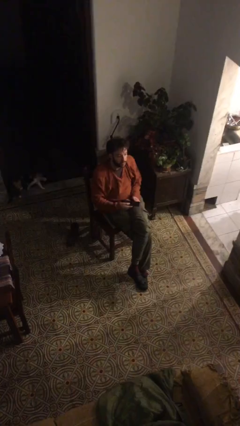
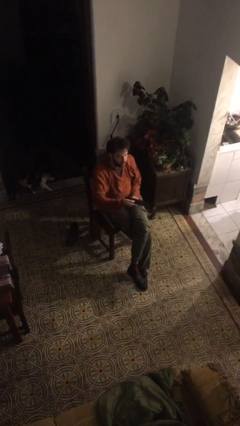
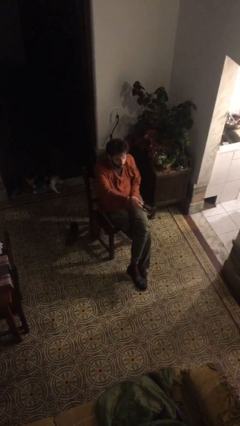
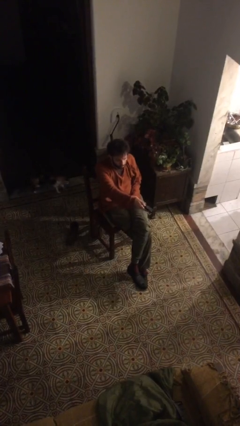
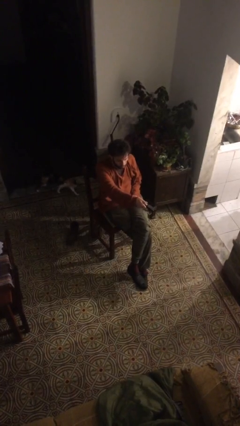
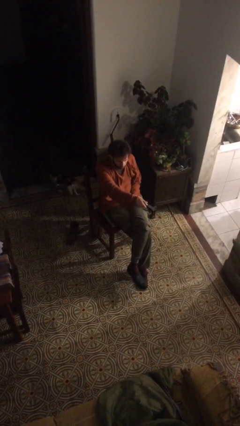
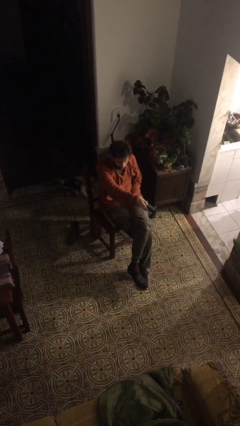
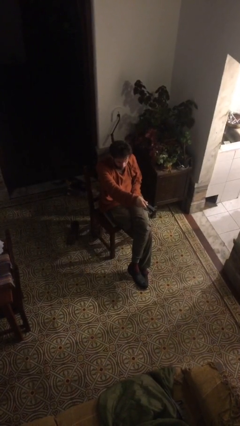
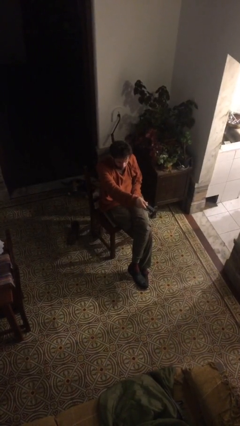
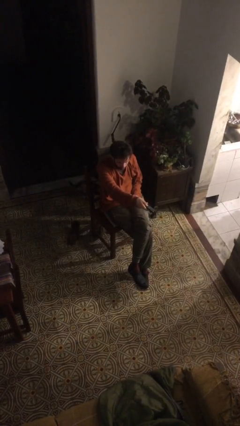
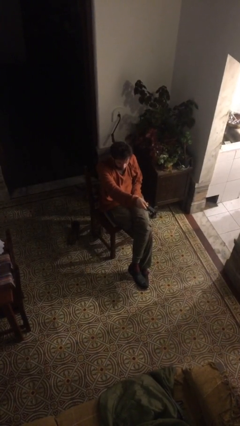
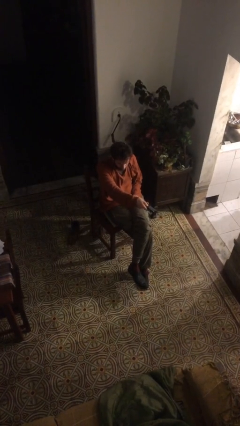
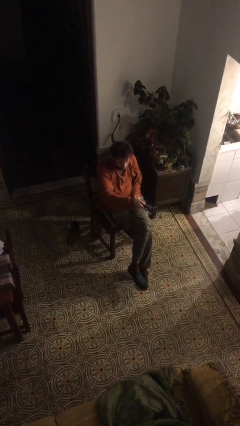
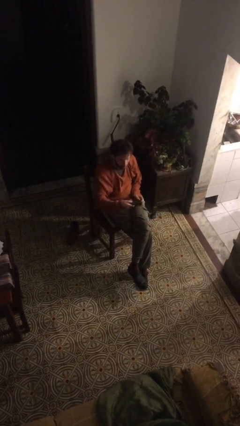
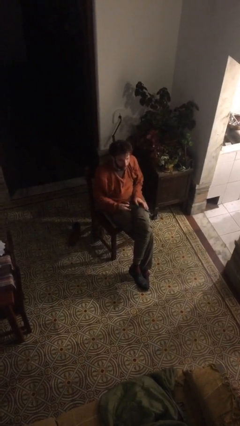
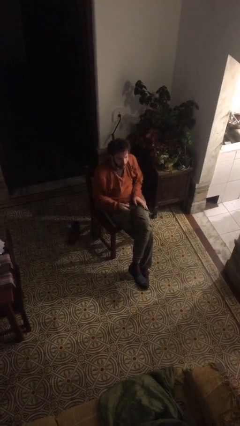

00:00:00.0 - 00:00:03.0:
person uses television remote

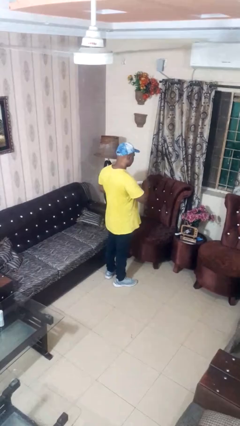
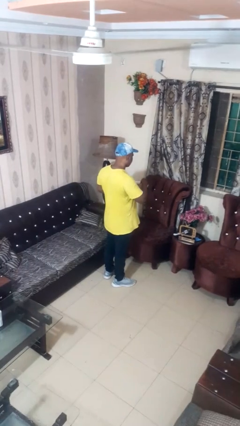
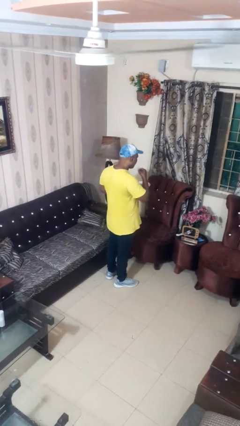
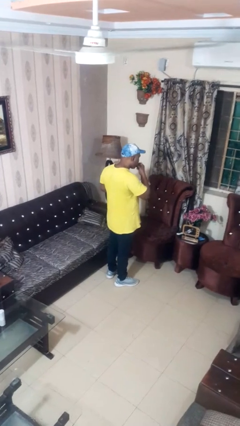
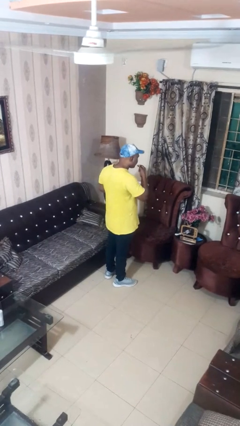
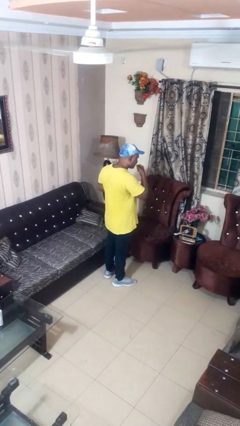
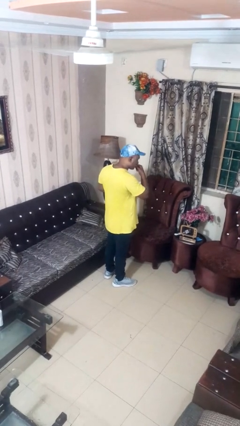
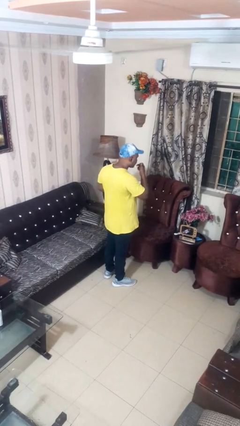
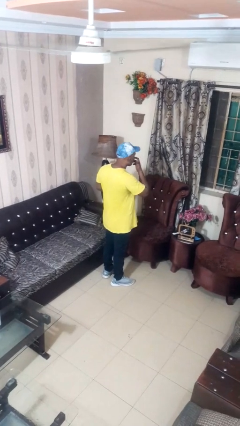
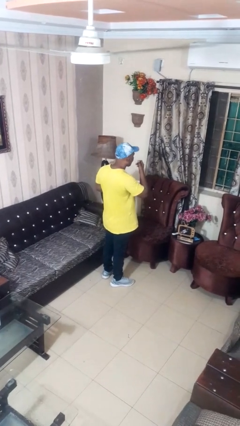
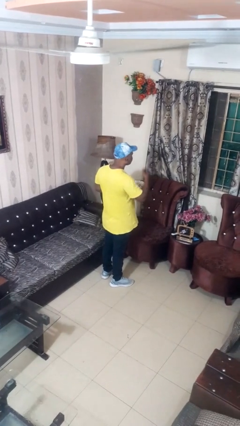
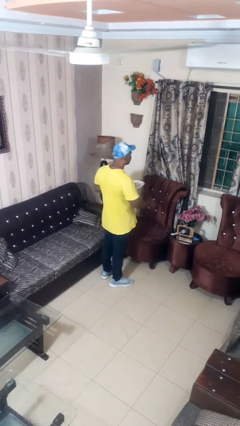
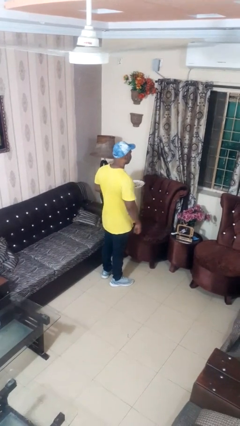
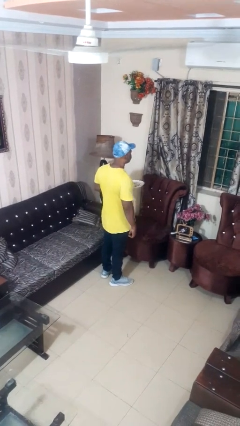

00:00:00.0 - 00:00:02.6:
person licks fingers

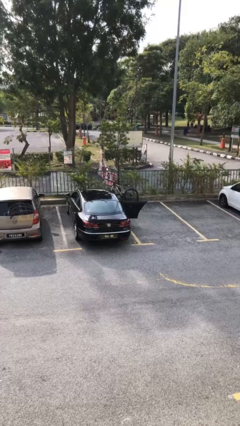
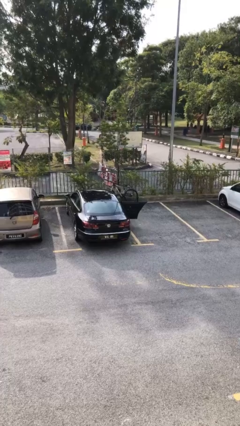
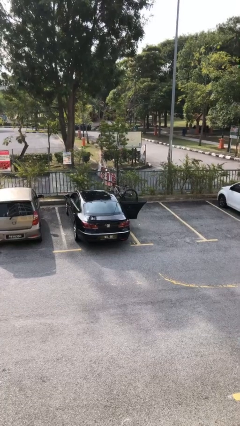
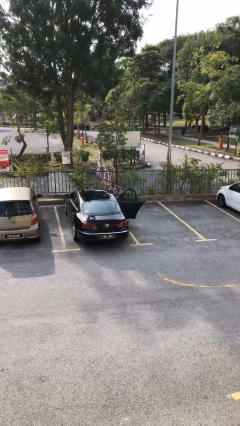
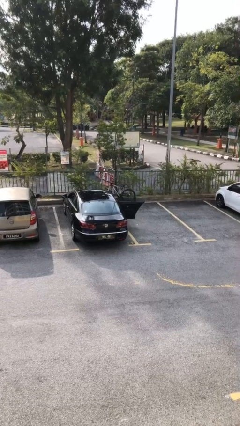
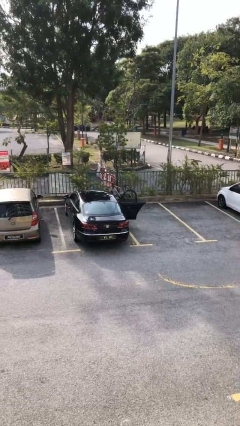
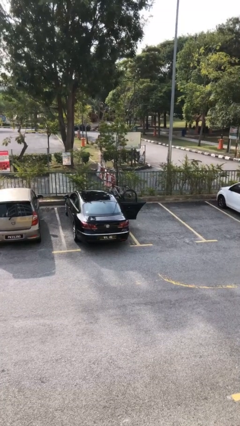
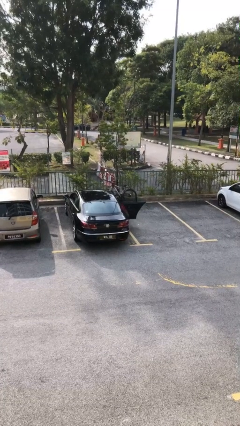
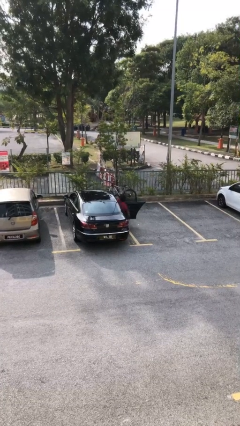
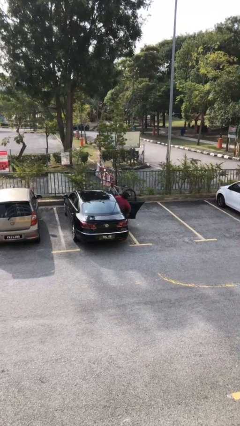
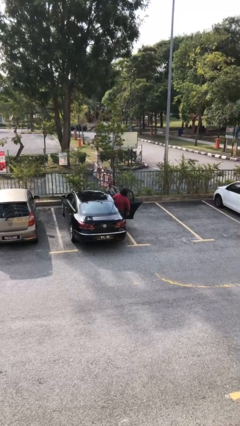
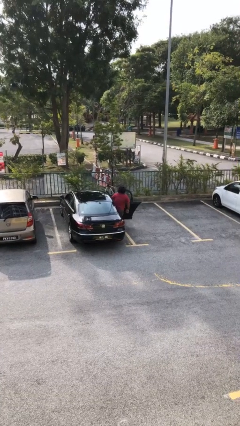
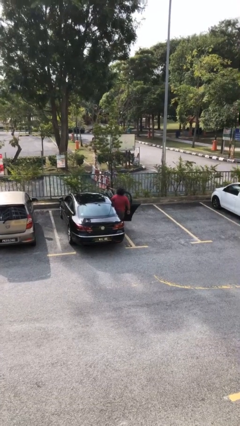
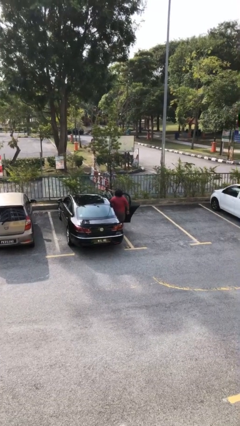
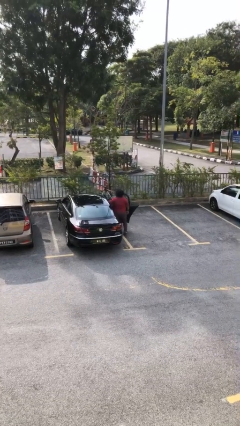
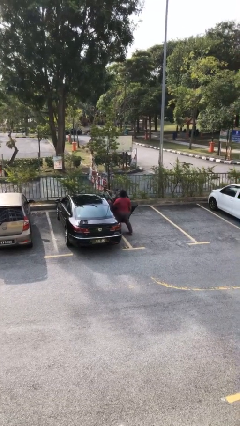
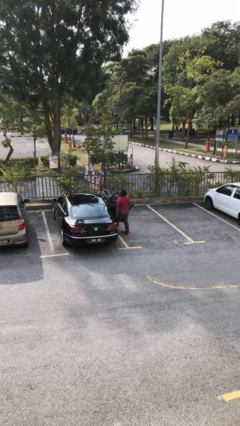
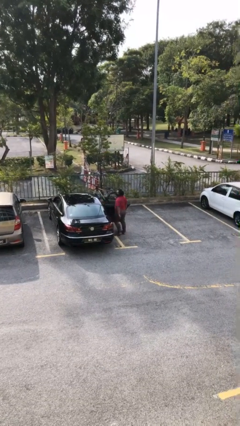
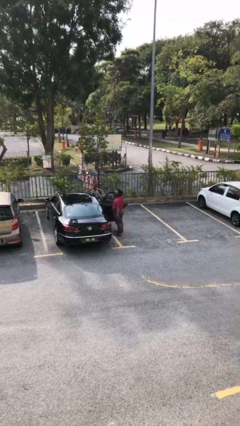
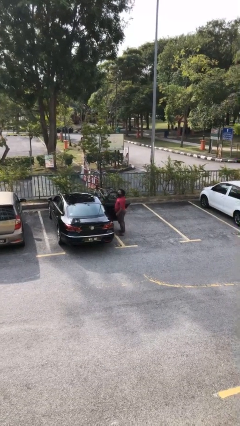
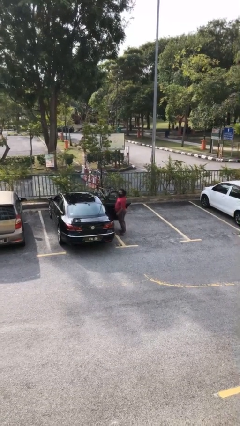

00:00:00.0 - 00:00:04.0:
person exits car

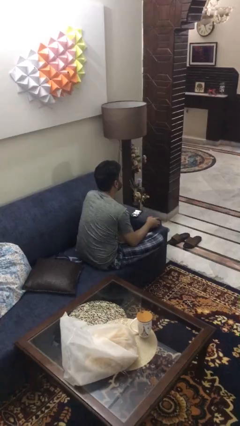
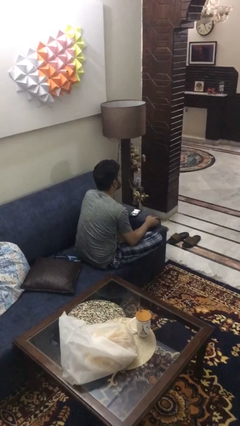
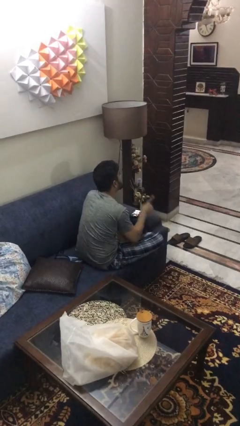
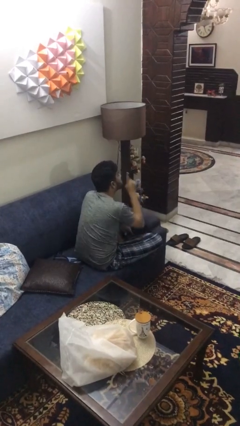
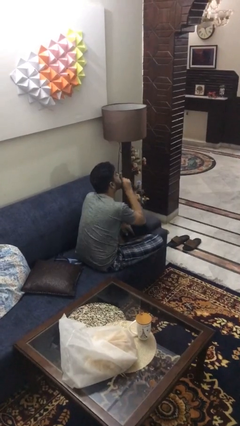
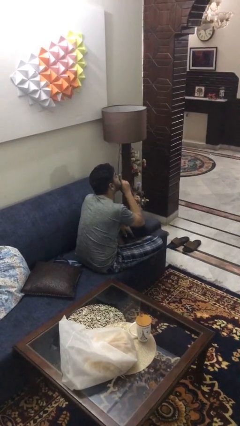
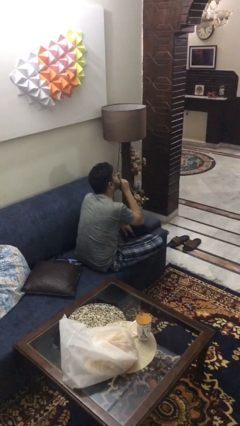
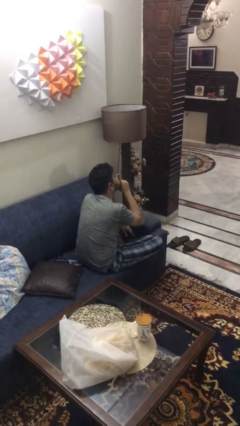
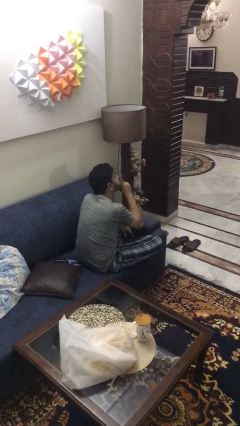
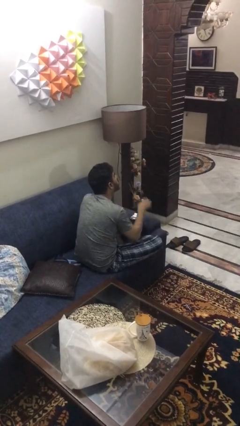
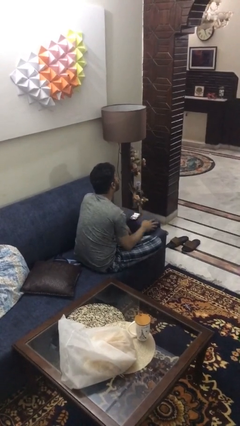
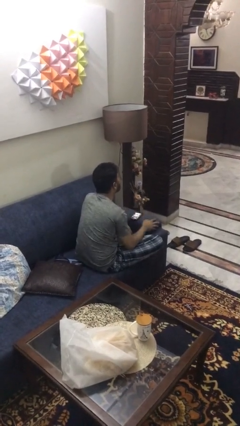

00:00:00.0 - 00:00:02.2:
person gestures be quiet

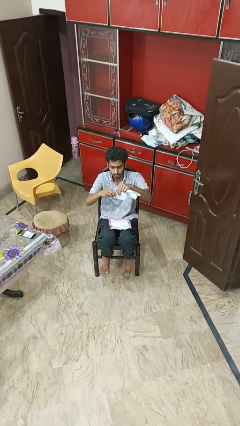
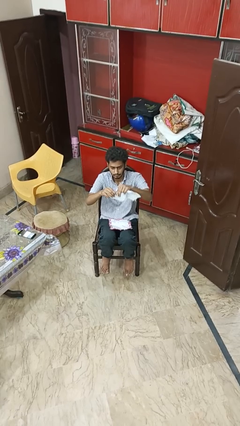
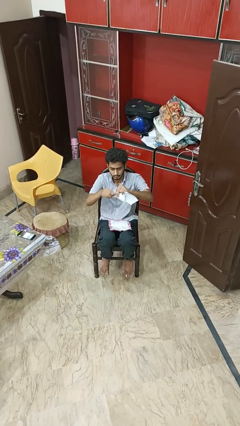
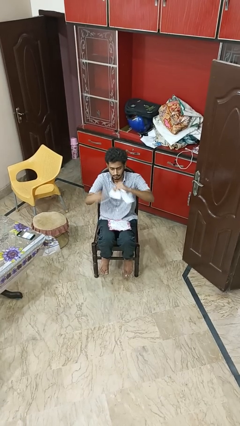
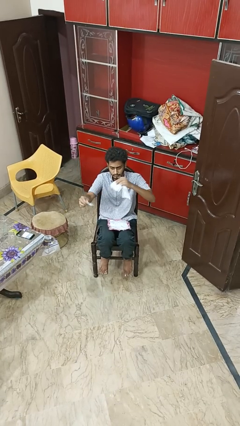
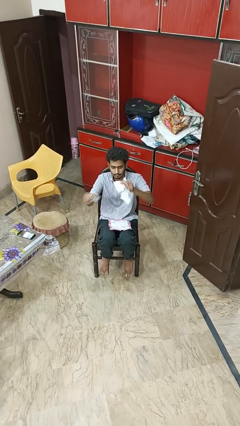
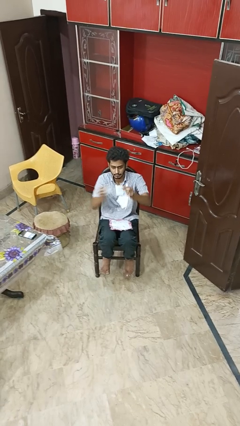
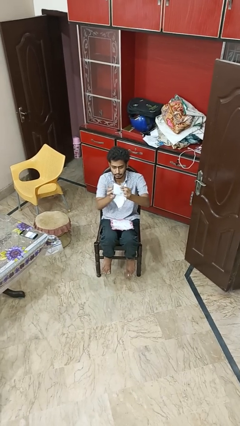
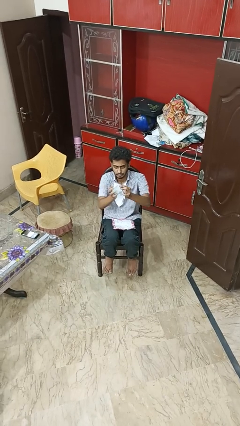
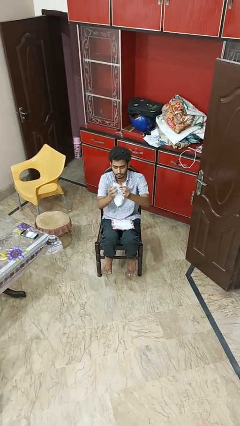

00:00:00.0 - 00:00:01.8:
person tears paper

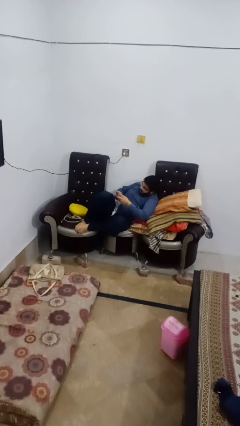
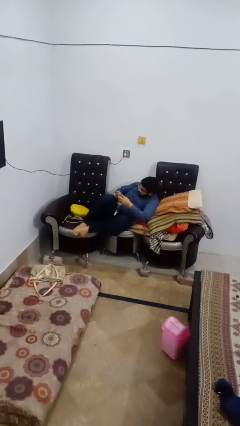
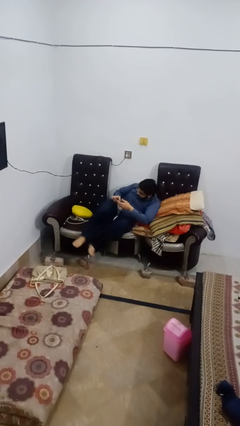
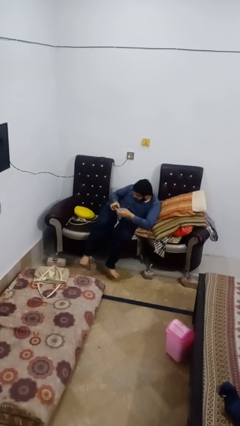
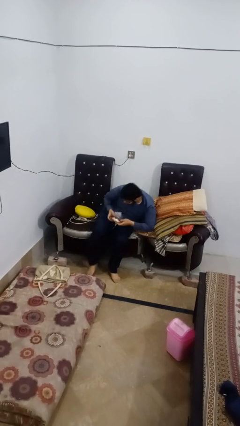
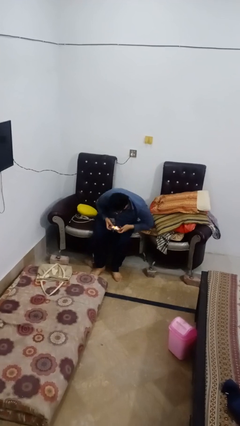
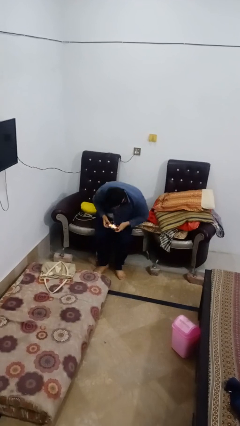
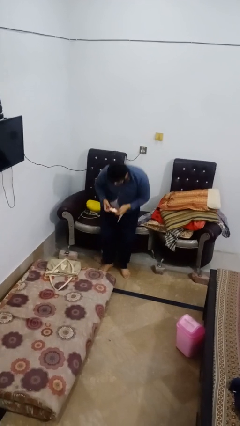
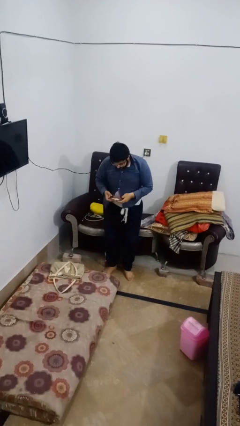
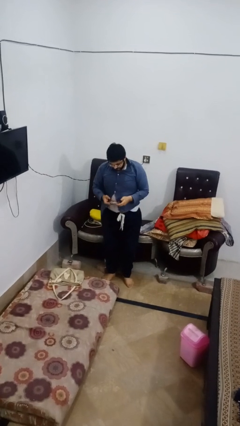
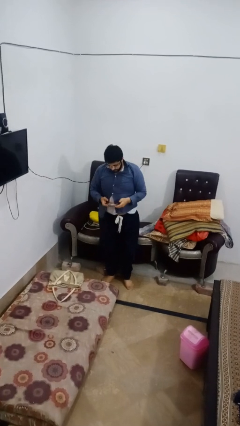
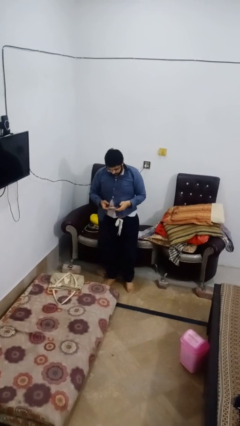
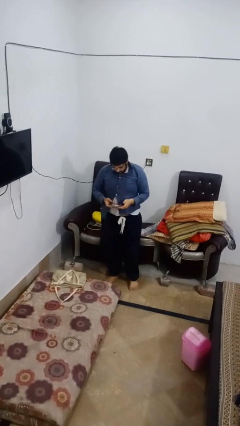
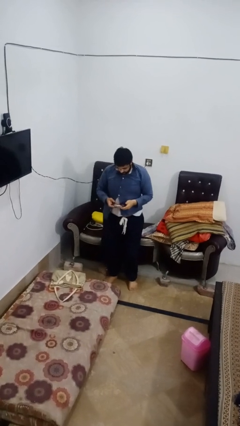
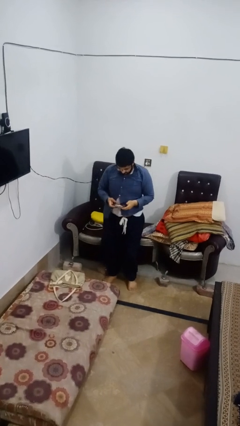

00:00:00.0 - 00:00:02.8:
person stands up

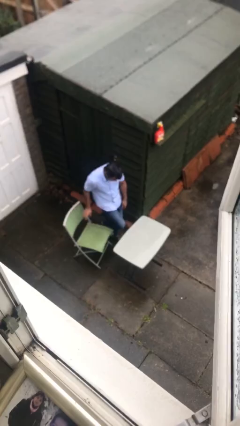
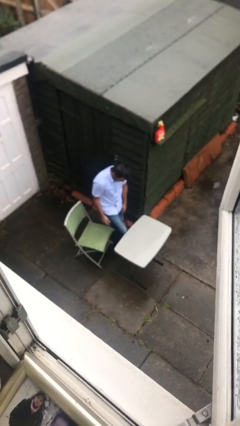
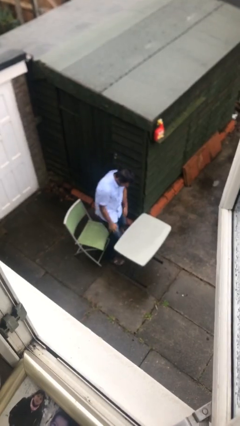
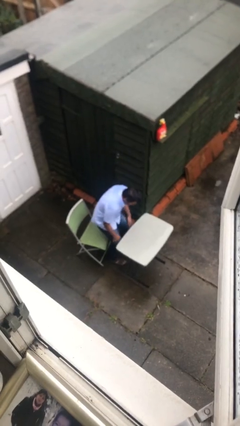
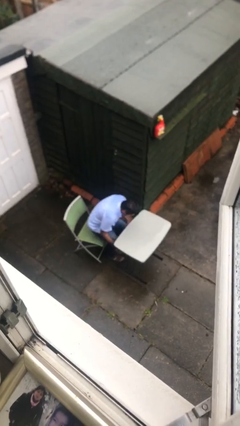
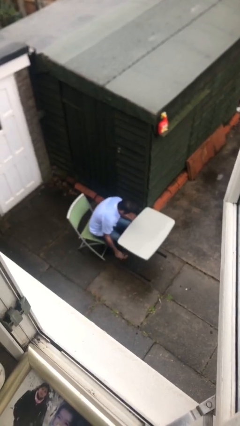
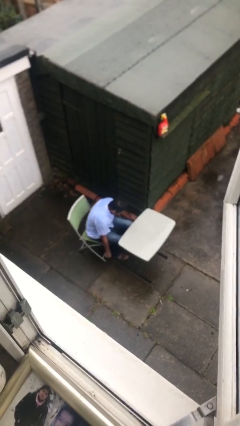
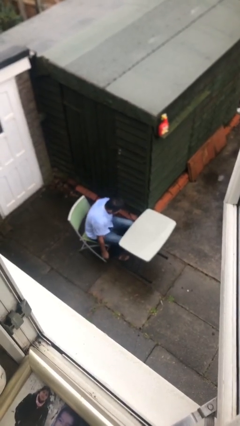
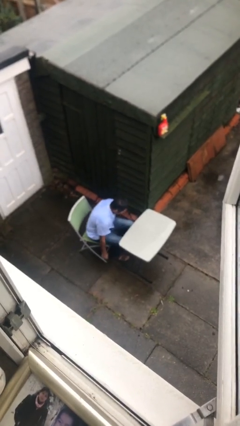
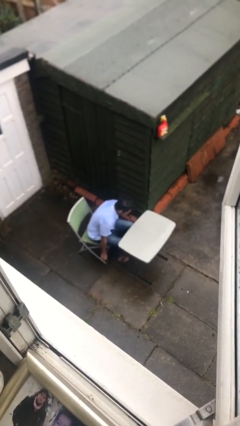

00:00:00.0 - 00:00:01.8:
person sits down
